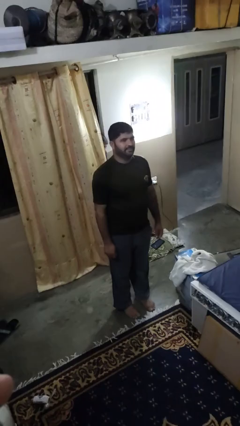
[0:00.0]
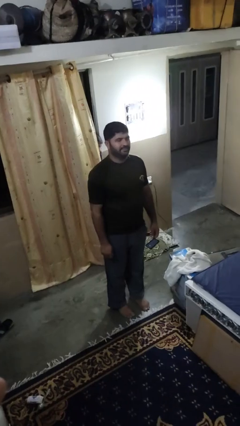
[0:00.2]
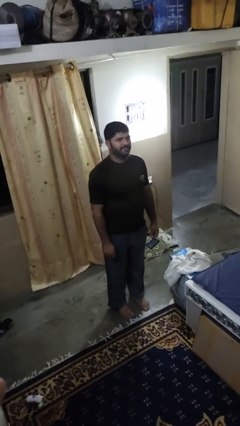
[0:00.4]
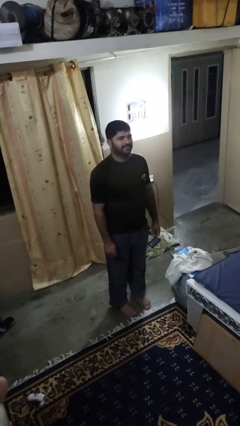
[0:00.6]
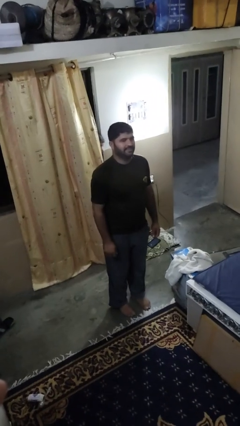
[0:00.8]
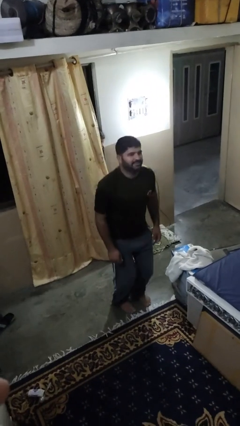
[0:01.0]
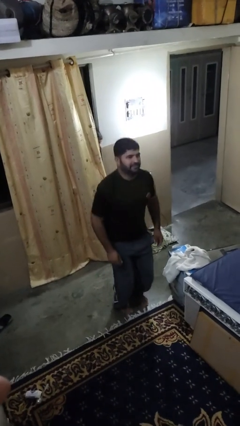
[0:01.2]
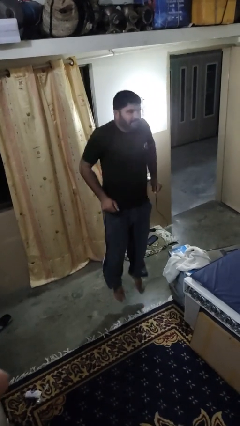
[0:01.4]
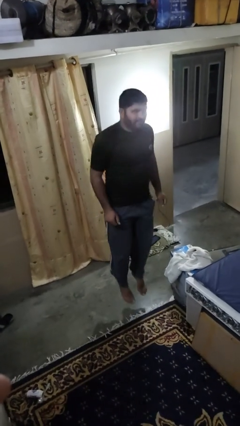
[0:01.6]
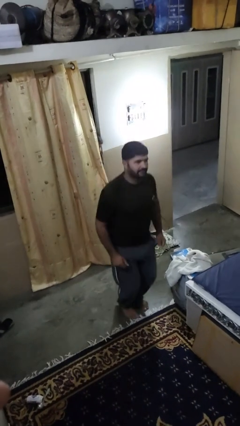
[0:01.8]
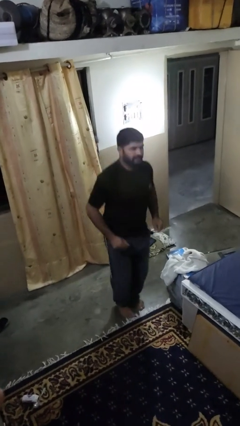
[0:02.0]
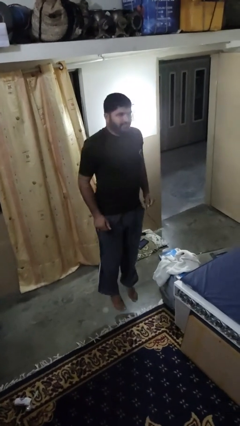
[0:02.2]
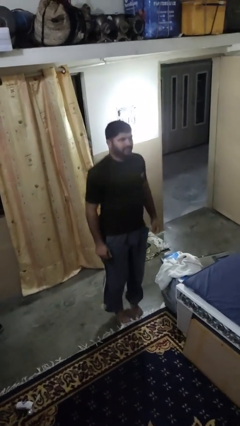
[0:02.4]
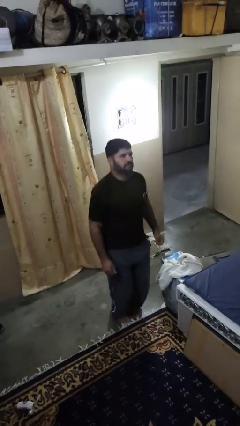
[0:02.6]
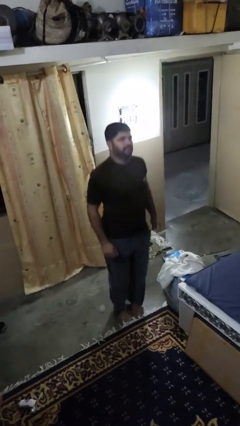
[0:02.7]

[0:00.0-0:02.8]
person jumps

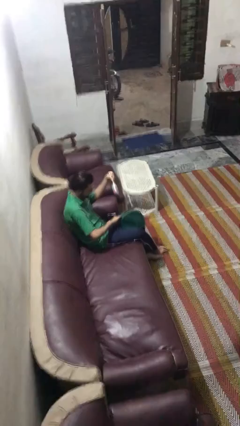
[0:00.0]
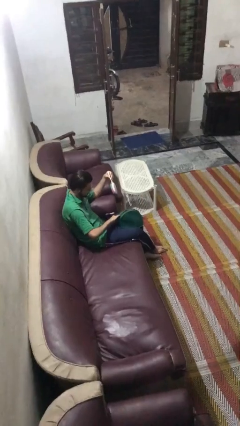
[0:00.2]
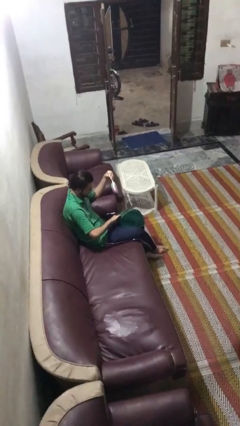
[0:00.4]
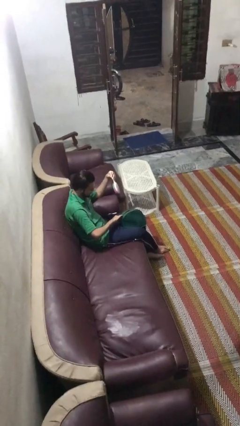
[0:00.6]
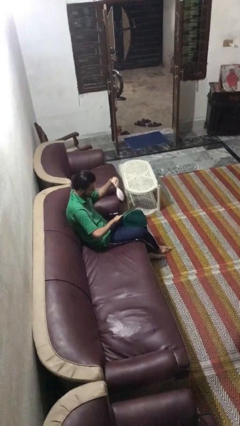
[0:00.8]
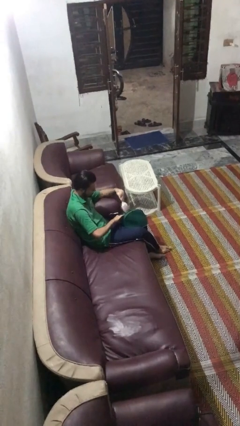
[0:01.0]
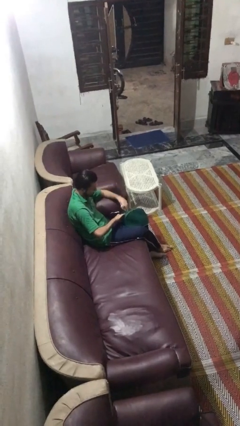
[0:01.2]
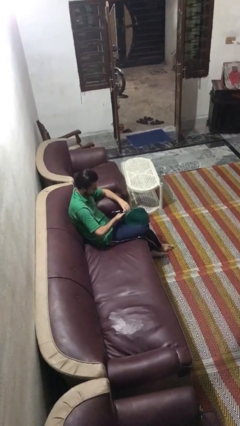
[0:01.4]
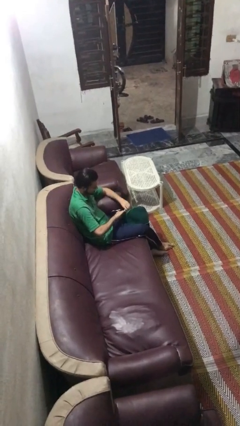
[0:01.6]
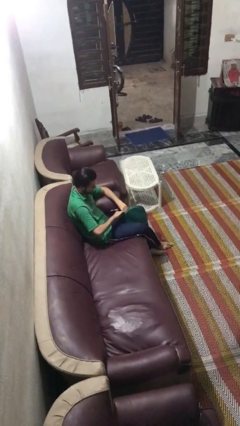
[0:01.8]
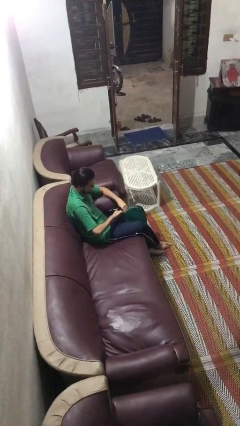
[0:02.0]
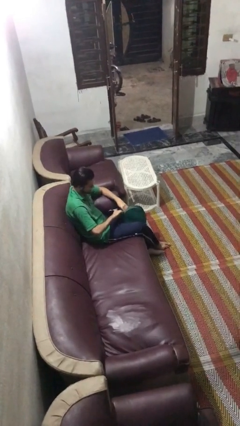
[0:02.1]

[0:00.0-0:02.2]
person puts object into purse

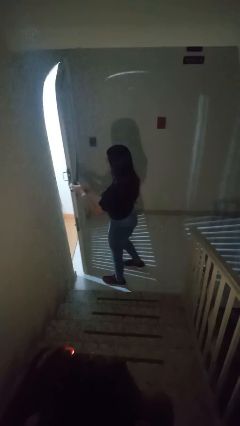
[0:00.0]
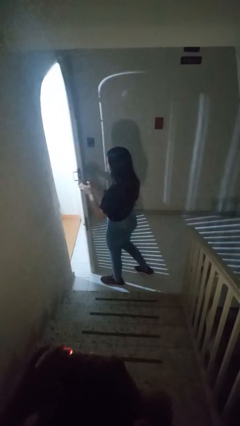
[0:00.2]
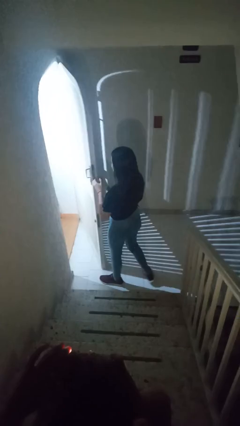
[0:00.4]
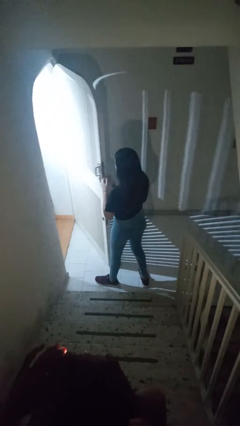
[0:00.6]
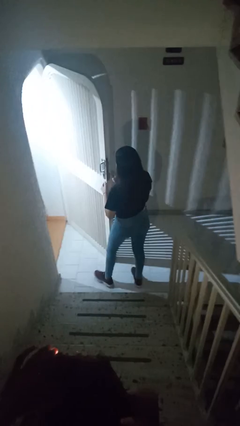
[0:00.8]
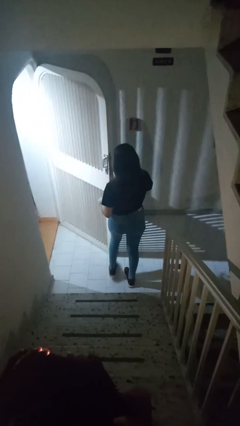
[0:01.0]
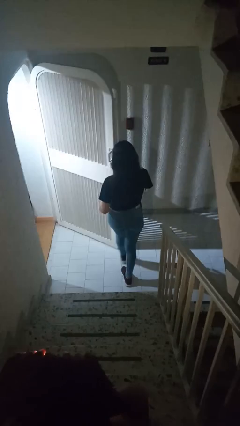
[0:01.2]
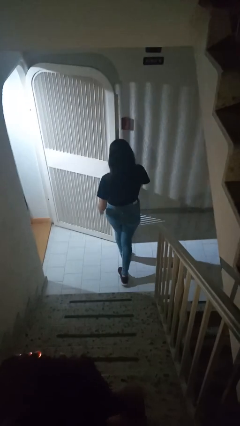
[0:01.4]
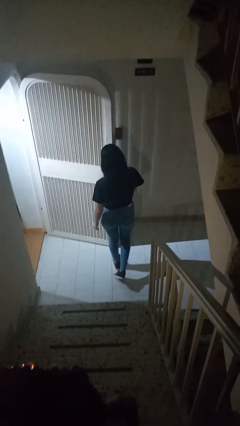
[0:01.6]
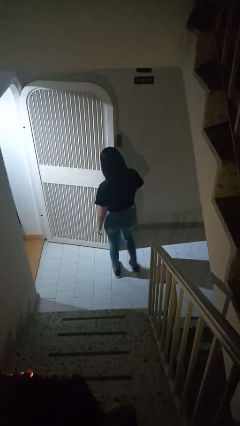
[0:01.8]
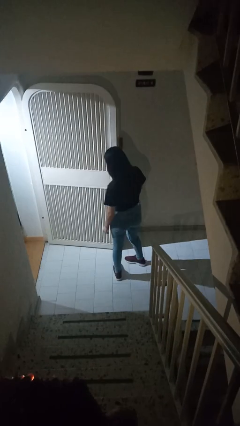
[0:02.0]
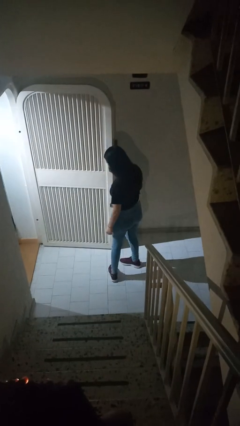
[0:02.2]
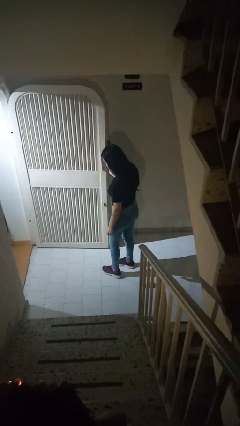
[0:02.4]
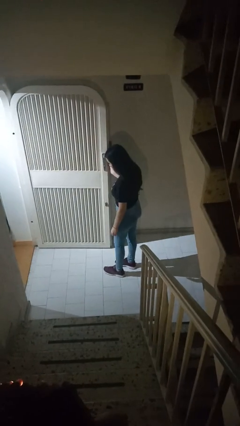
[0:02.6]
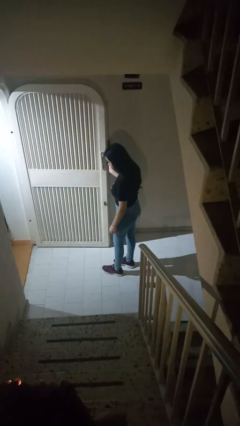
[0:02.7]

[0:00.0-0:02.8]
person opens facility door

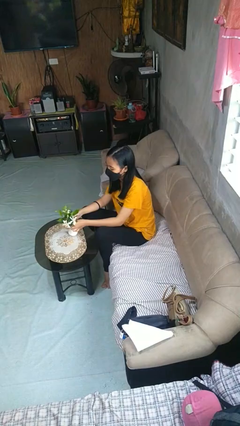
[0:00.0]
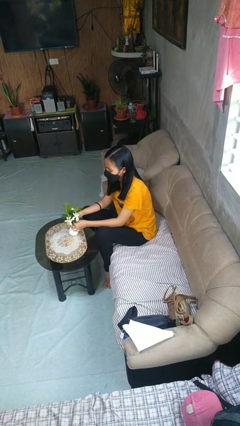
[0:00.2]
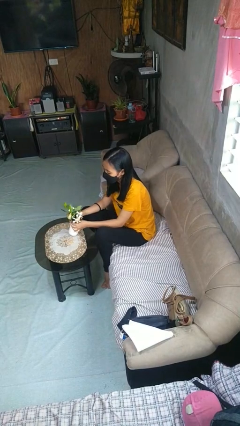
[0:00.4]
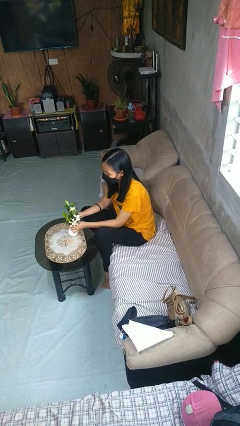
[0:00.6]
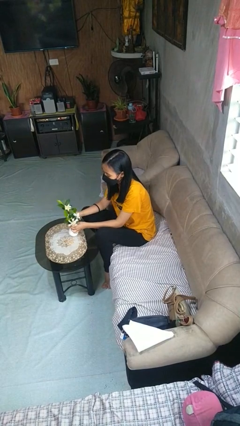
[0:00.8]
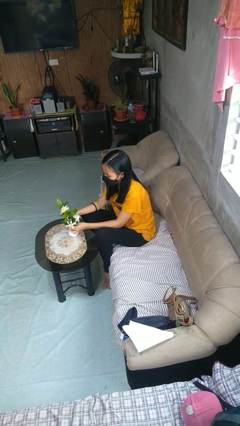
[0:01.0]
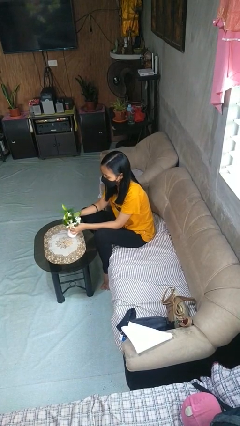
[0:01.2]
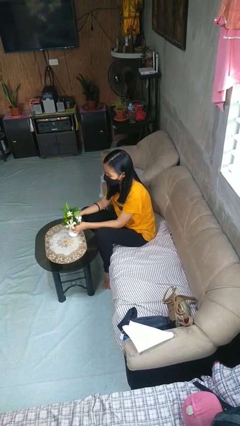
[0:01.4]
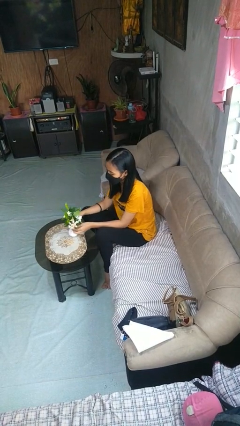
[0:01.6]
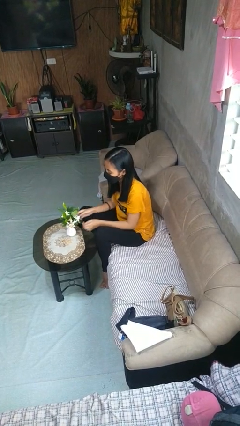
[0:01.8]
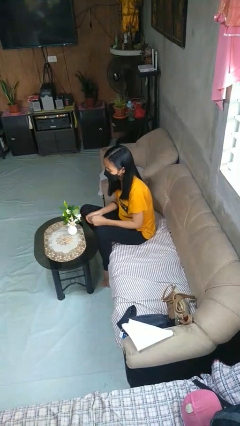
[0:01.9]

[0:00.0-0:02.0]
person arranges flowers in vase

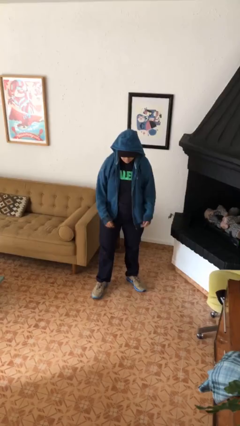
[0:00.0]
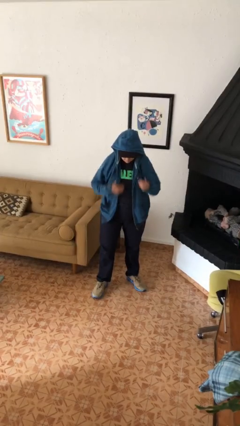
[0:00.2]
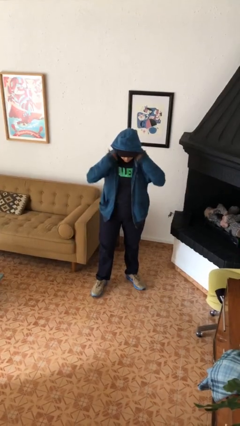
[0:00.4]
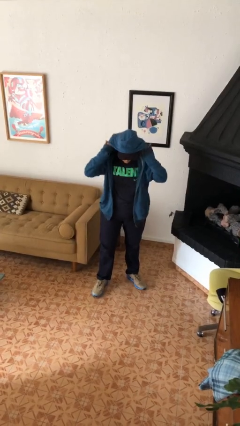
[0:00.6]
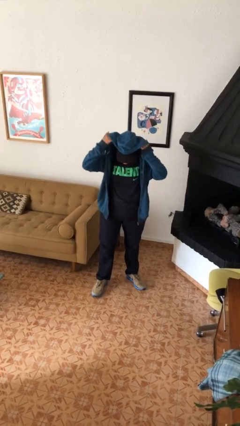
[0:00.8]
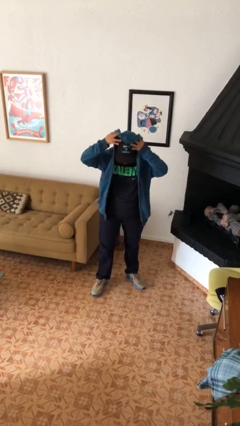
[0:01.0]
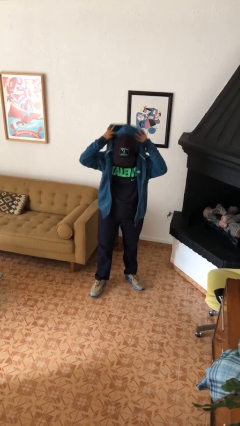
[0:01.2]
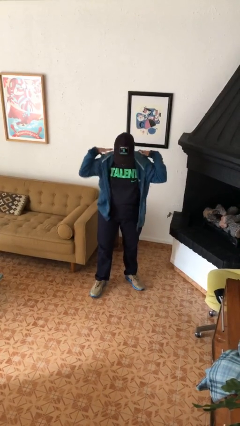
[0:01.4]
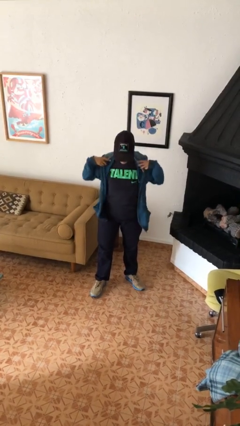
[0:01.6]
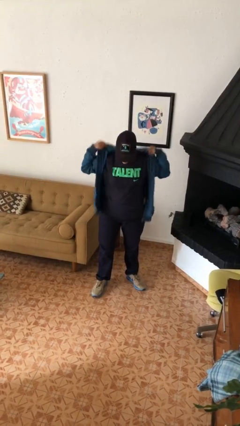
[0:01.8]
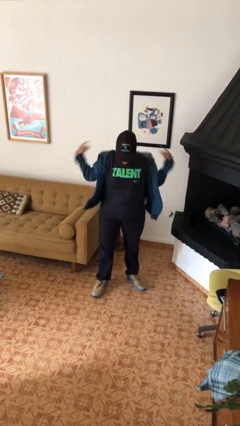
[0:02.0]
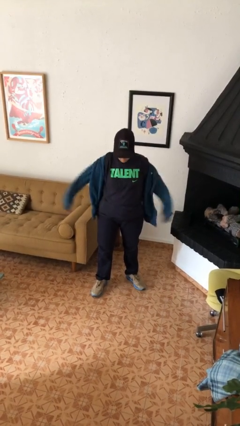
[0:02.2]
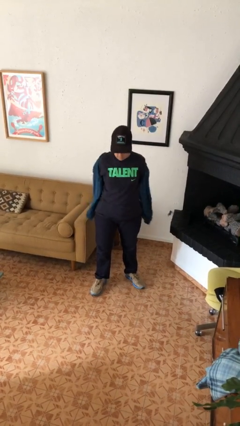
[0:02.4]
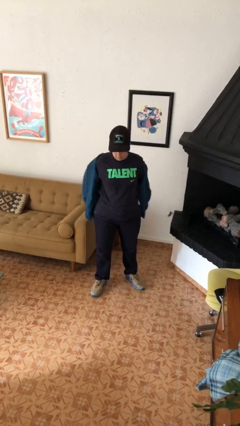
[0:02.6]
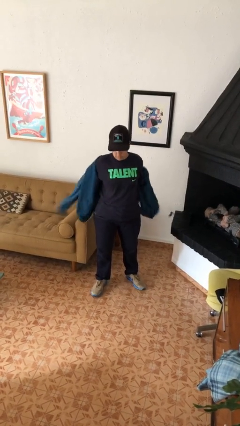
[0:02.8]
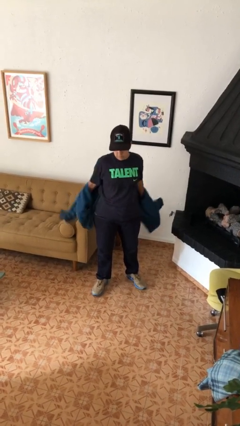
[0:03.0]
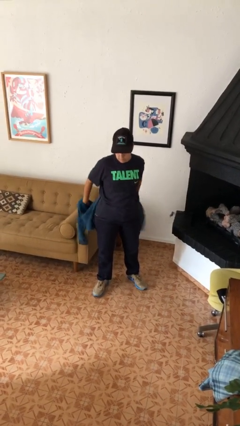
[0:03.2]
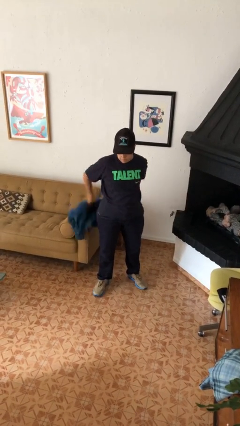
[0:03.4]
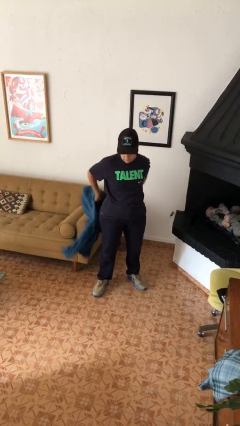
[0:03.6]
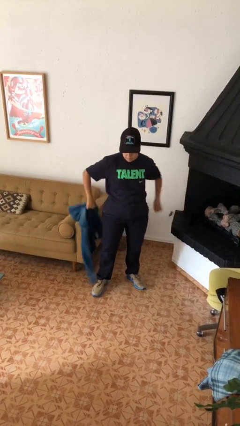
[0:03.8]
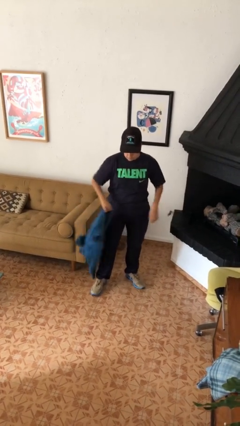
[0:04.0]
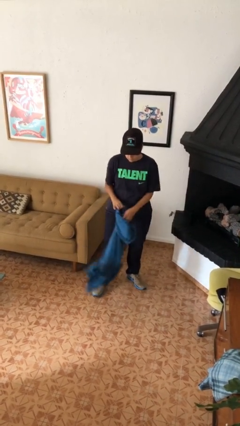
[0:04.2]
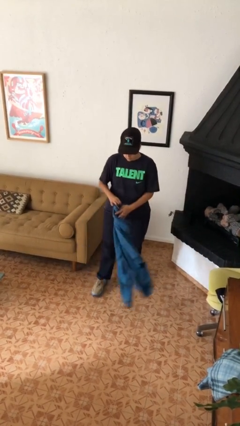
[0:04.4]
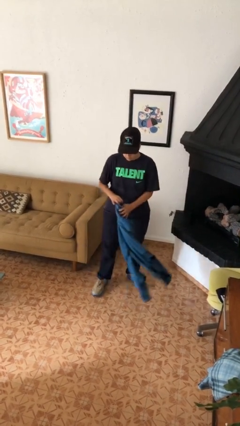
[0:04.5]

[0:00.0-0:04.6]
person takes off hoodie

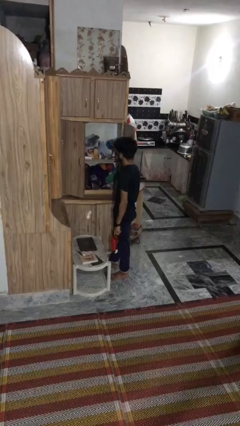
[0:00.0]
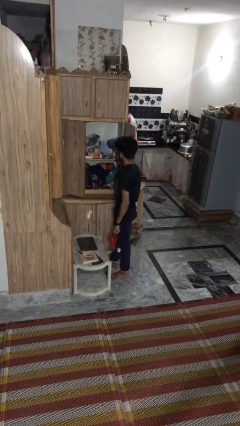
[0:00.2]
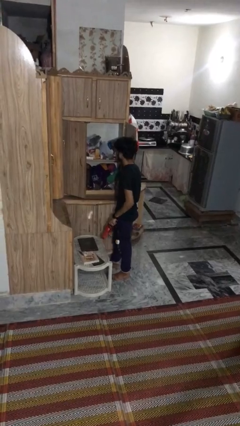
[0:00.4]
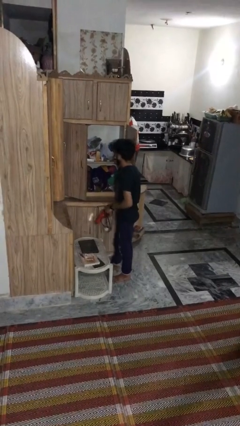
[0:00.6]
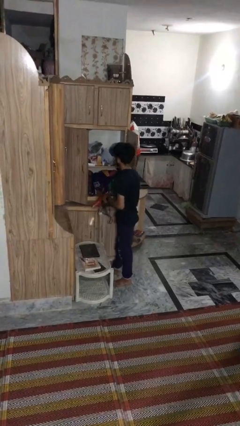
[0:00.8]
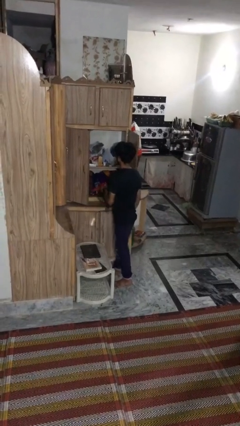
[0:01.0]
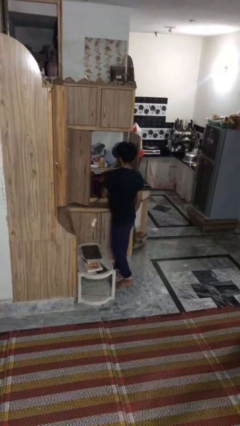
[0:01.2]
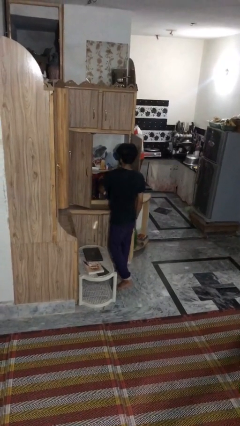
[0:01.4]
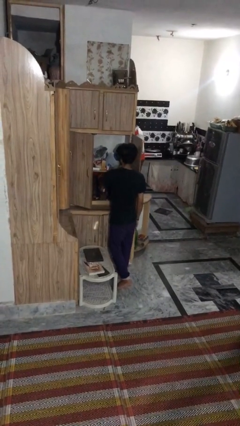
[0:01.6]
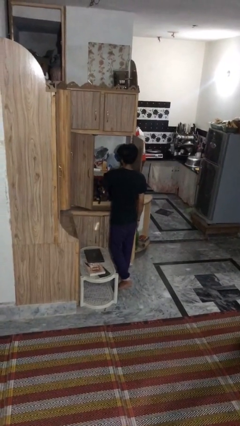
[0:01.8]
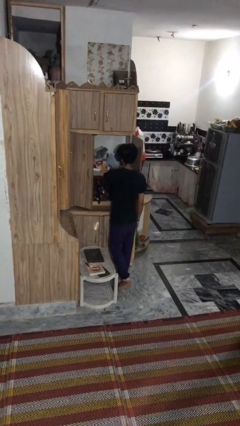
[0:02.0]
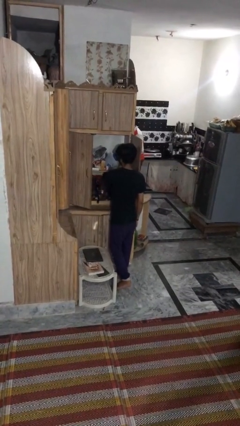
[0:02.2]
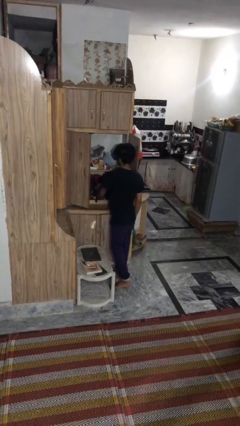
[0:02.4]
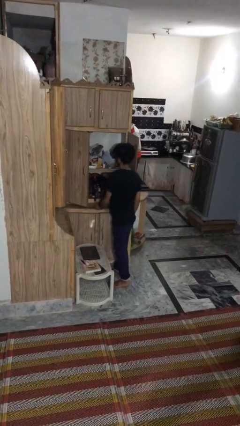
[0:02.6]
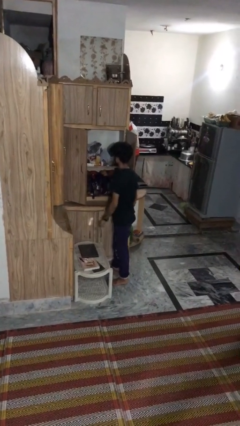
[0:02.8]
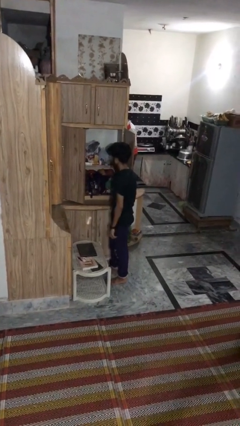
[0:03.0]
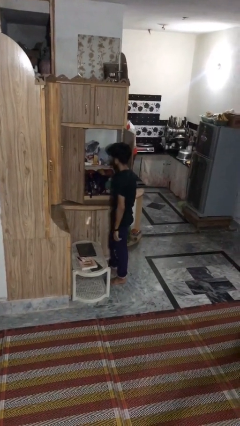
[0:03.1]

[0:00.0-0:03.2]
person puts down object into cabinet
